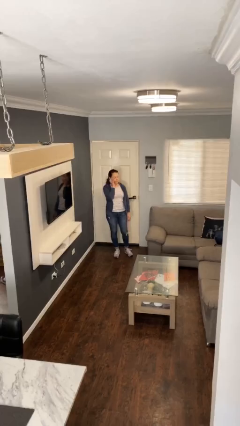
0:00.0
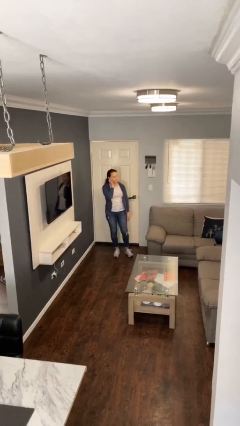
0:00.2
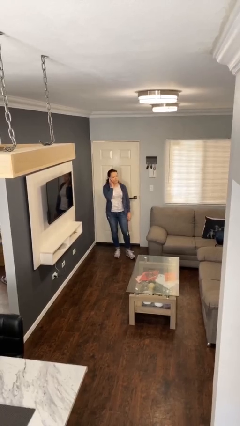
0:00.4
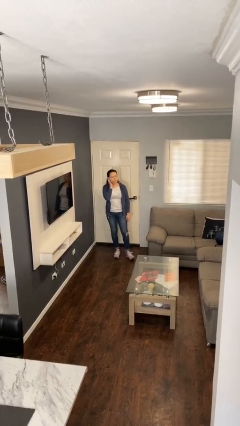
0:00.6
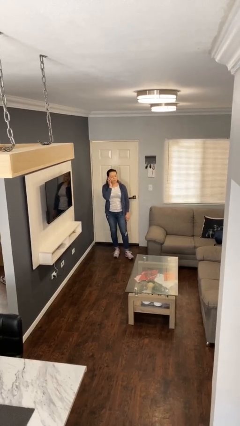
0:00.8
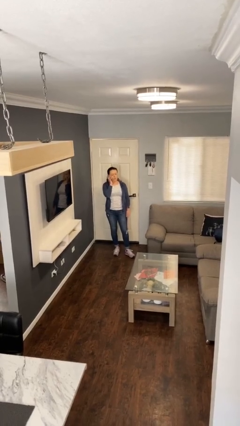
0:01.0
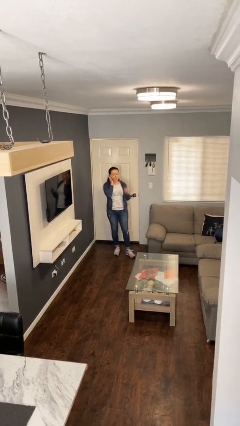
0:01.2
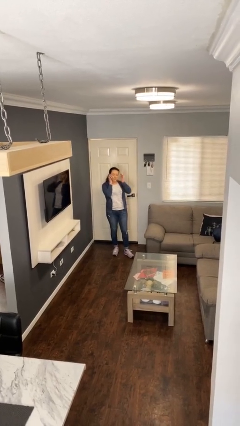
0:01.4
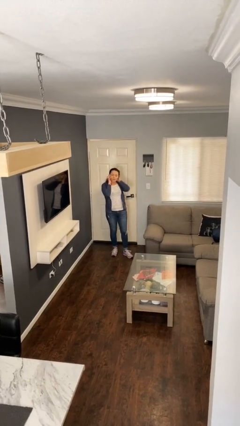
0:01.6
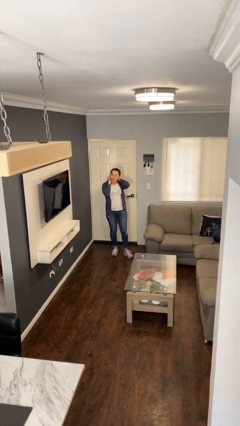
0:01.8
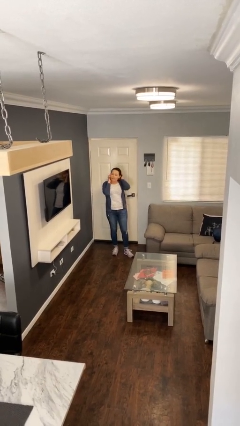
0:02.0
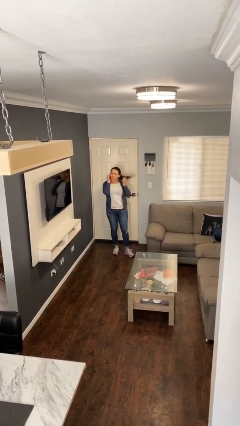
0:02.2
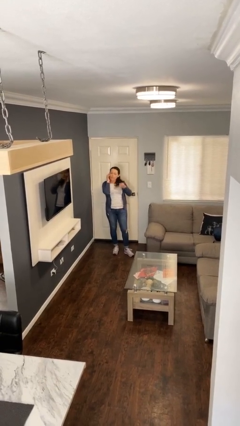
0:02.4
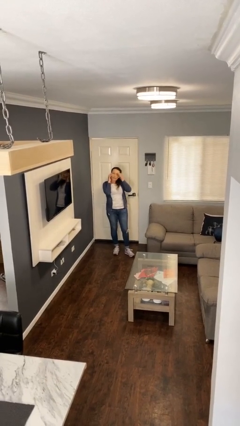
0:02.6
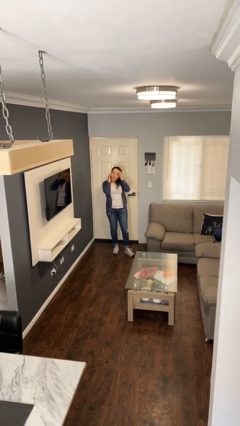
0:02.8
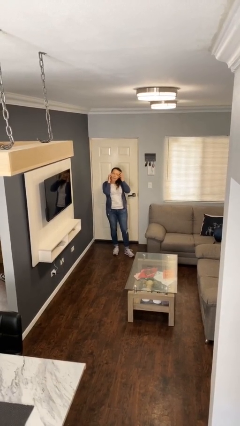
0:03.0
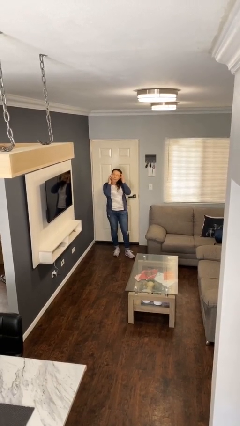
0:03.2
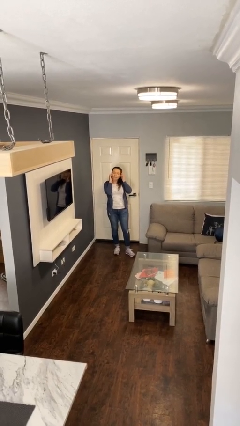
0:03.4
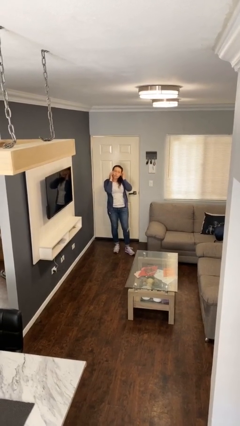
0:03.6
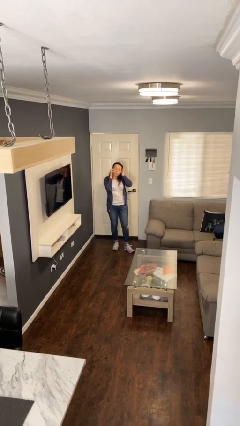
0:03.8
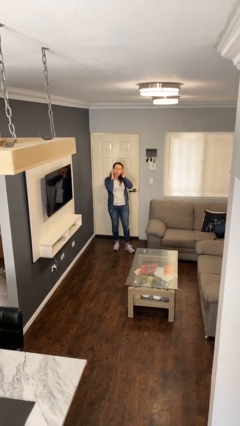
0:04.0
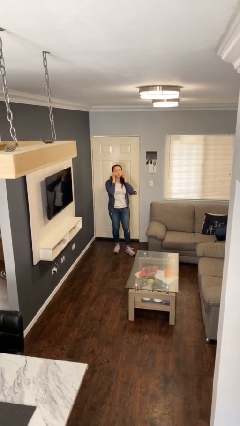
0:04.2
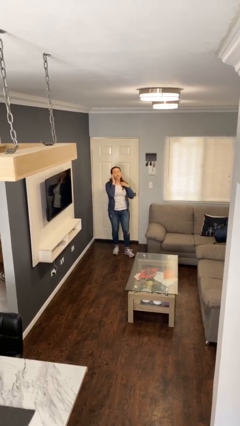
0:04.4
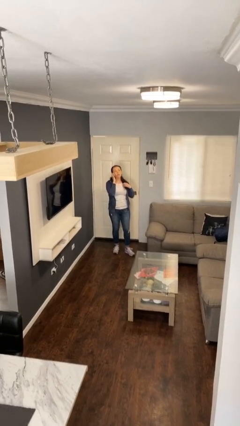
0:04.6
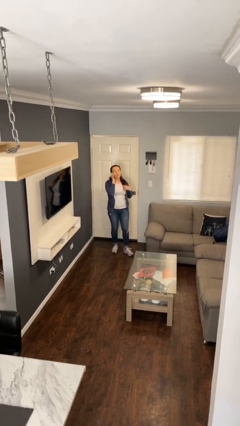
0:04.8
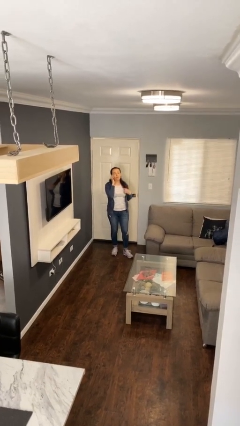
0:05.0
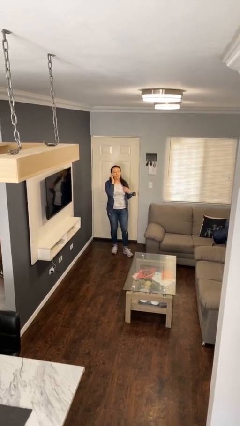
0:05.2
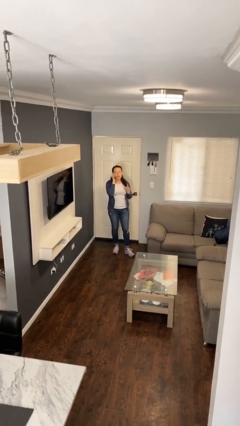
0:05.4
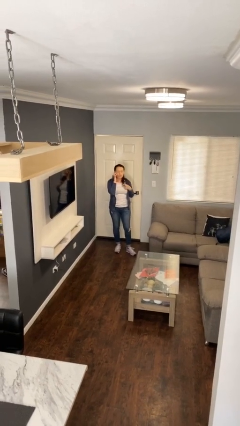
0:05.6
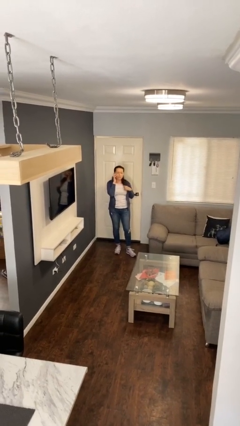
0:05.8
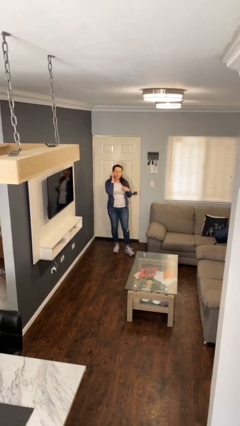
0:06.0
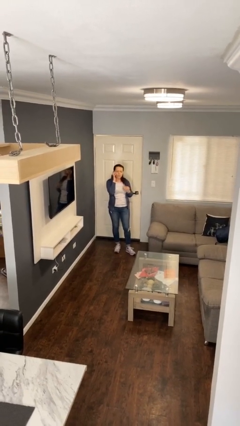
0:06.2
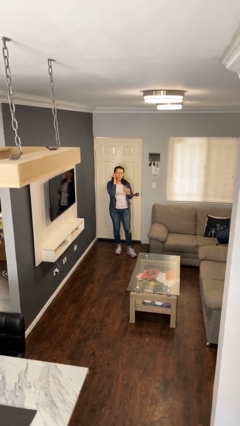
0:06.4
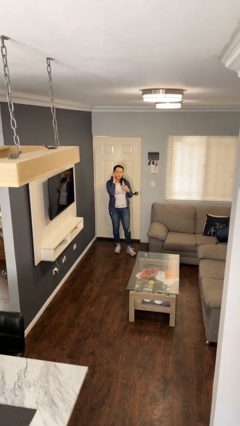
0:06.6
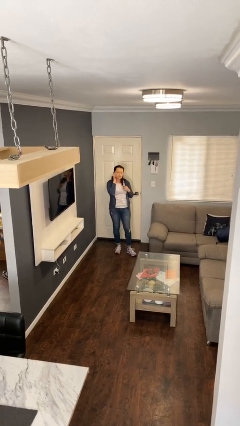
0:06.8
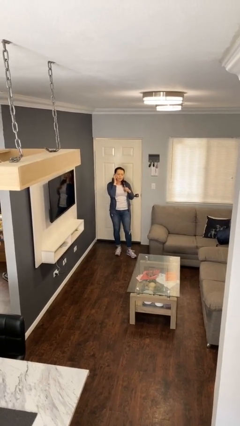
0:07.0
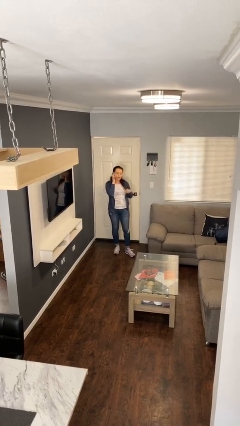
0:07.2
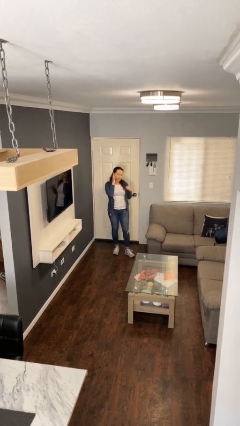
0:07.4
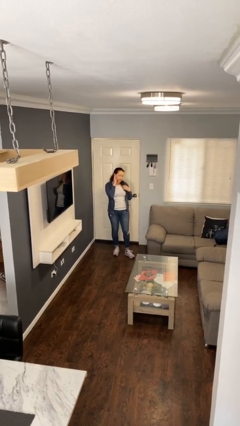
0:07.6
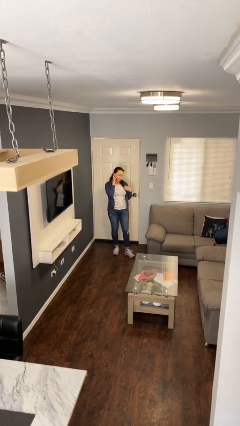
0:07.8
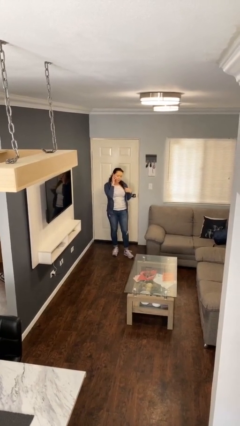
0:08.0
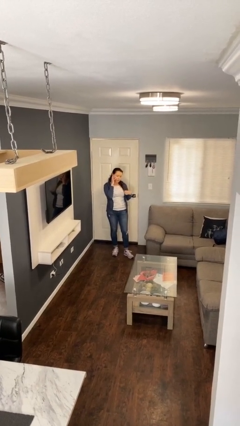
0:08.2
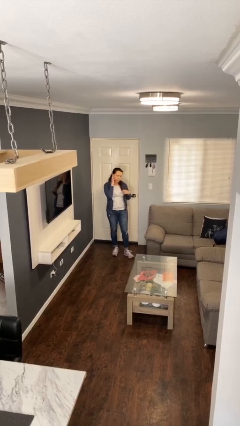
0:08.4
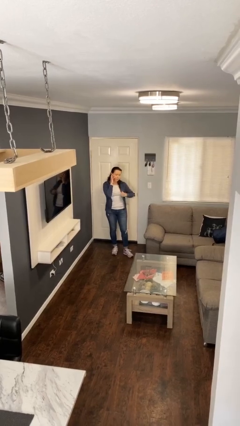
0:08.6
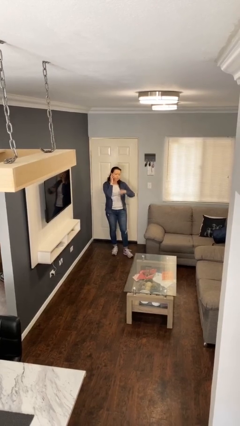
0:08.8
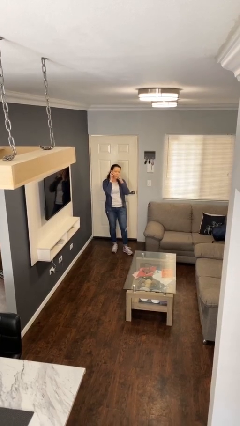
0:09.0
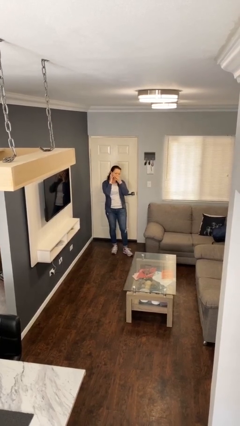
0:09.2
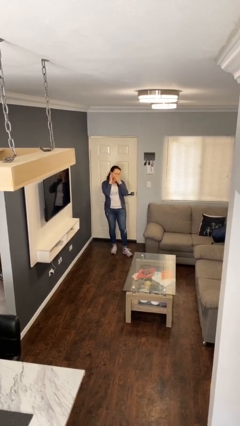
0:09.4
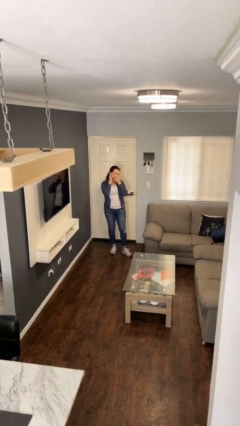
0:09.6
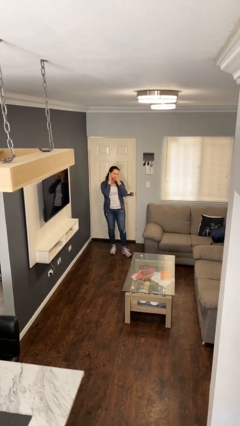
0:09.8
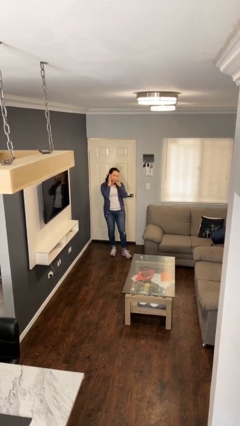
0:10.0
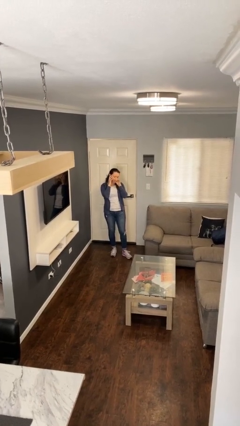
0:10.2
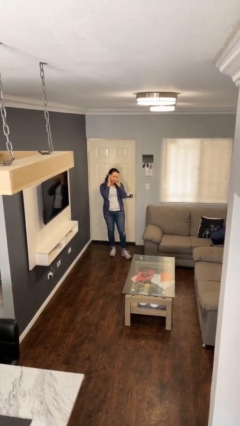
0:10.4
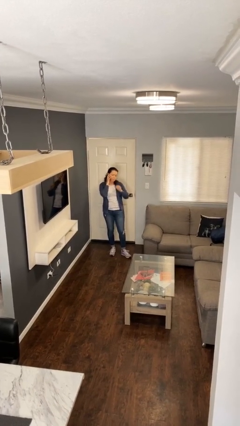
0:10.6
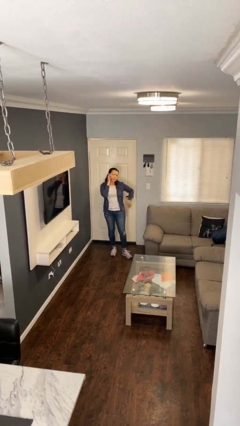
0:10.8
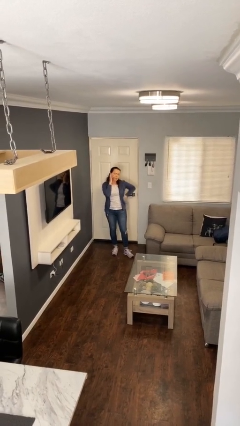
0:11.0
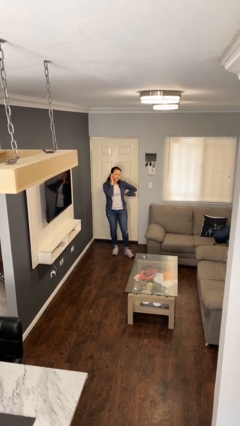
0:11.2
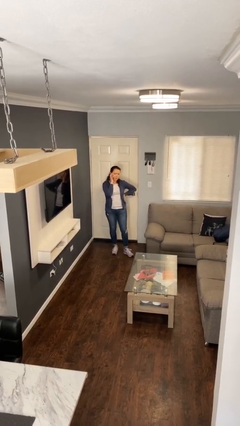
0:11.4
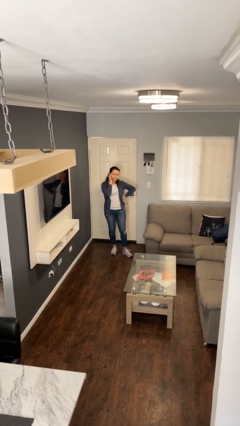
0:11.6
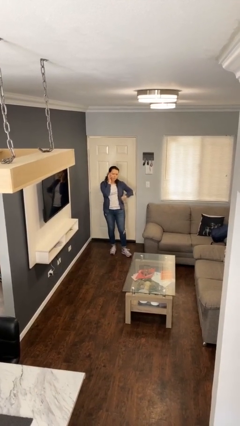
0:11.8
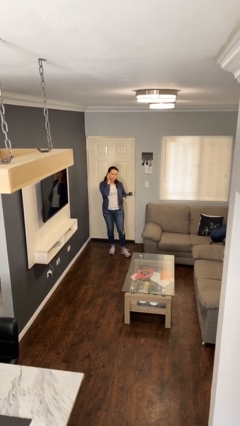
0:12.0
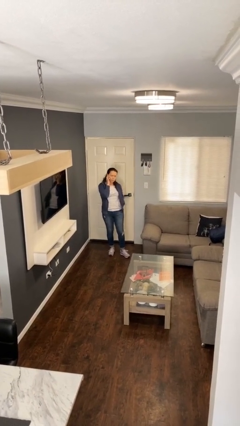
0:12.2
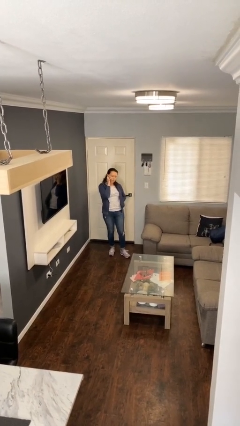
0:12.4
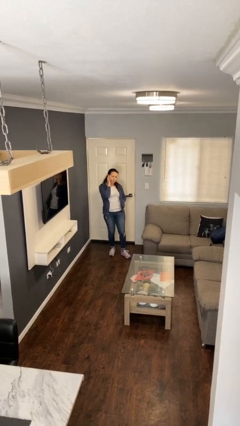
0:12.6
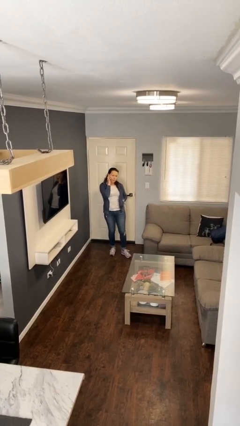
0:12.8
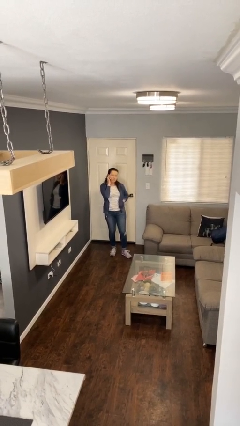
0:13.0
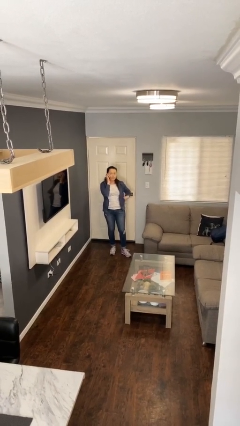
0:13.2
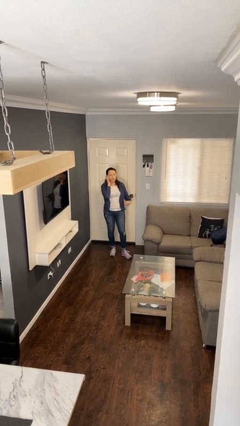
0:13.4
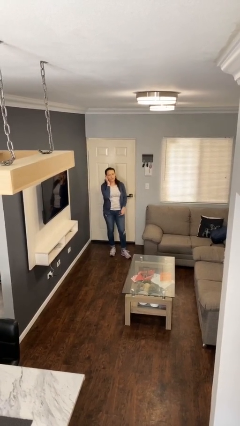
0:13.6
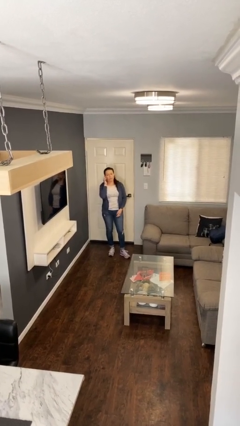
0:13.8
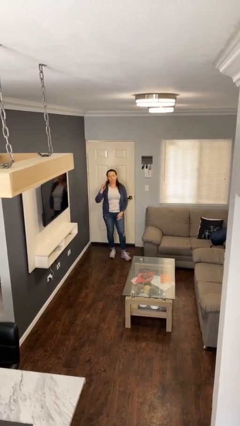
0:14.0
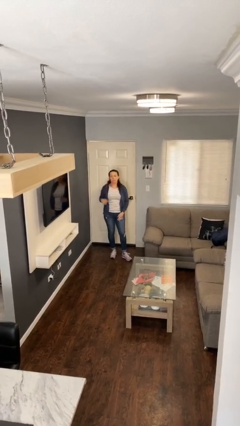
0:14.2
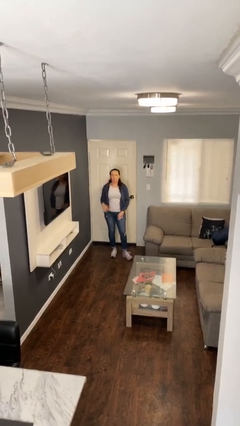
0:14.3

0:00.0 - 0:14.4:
person talks on phone

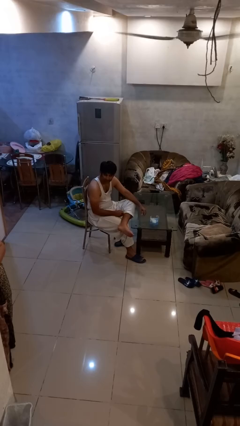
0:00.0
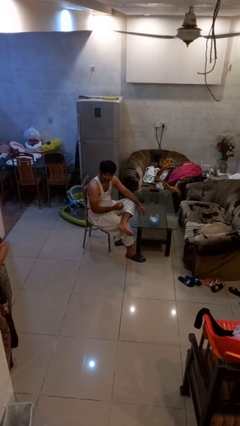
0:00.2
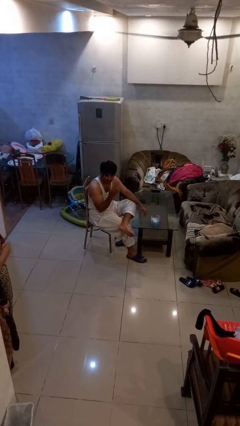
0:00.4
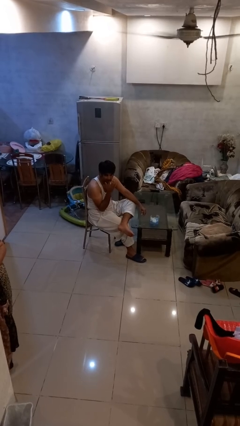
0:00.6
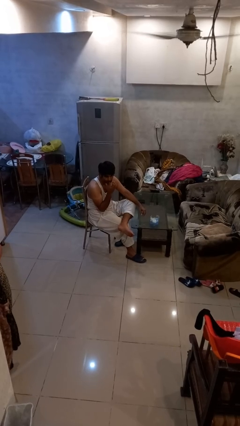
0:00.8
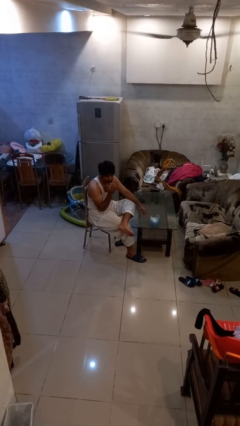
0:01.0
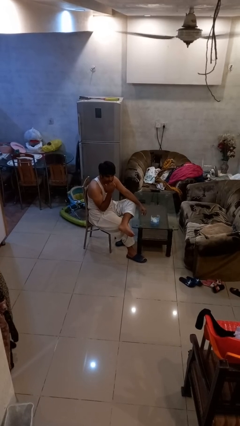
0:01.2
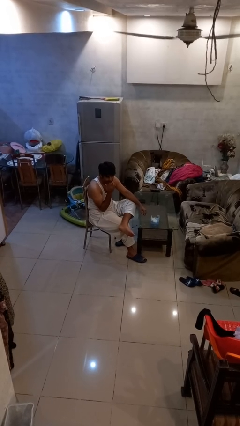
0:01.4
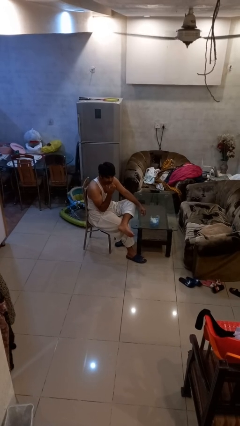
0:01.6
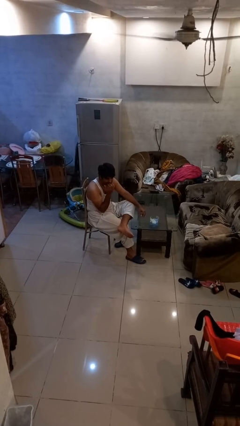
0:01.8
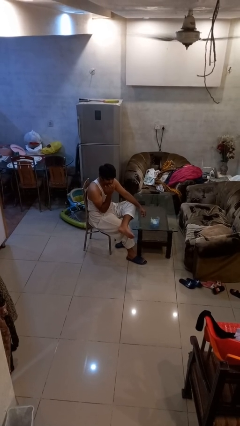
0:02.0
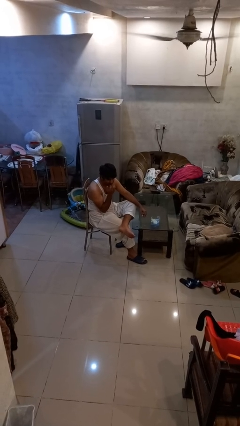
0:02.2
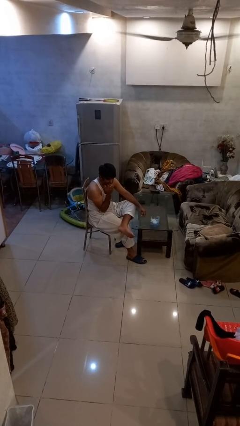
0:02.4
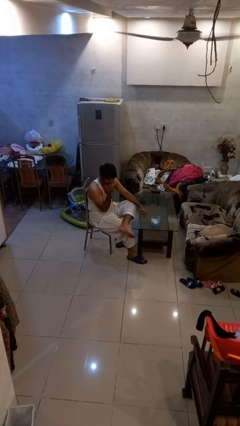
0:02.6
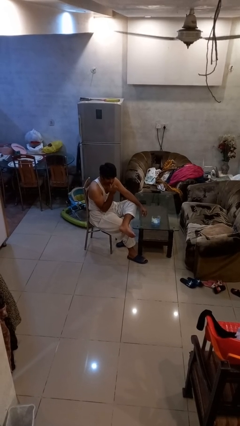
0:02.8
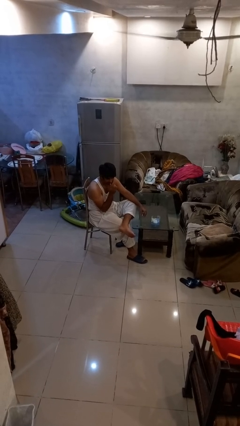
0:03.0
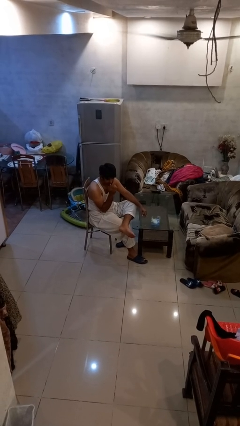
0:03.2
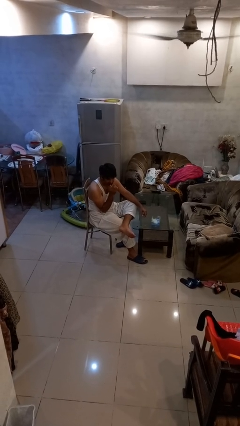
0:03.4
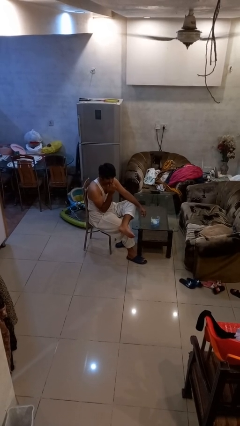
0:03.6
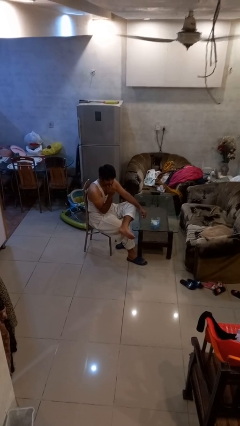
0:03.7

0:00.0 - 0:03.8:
person licks fingers
